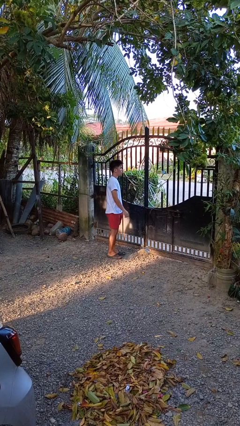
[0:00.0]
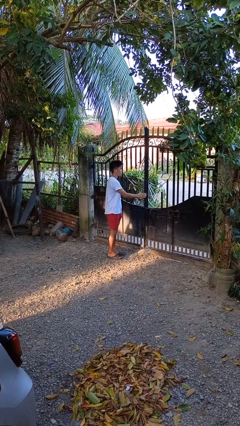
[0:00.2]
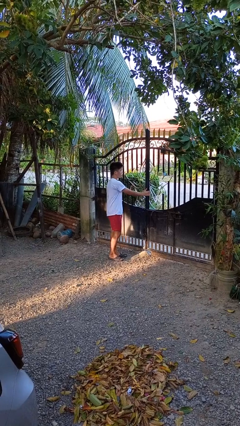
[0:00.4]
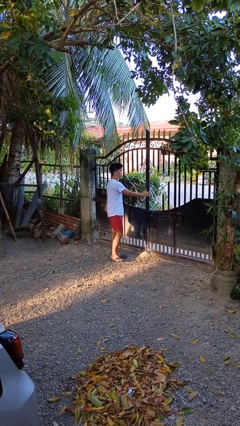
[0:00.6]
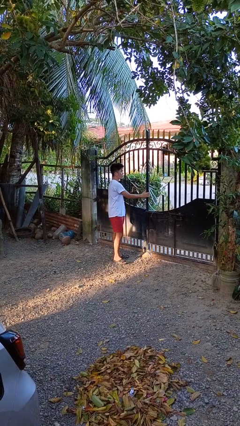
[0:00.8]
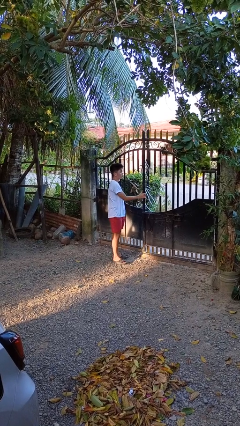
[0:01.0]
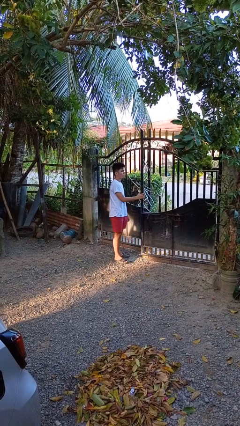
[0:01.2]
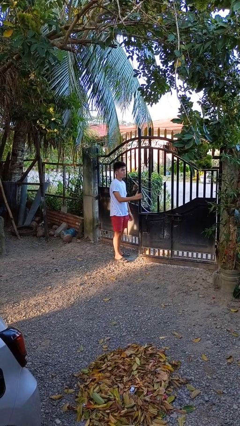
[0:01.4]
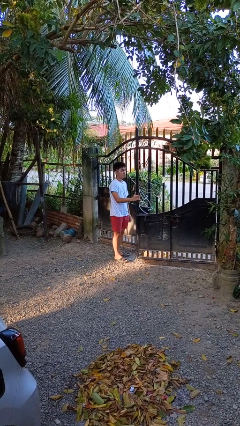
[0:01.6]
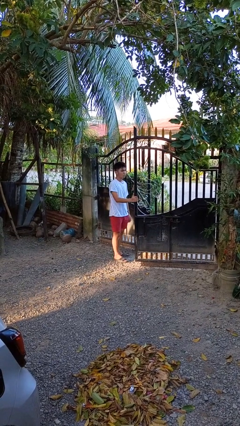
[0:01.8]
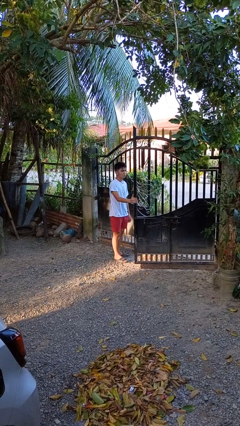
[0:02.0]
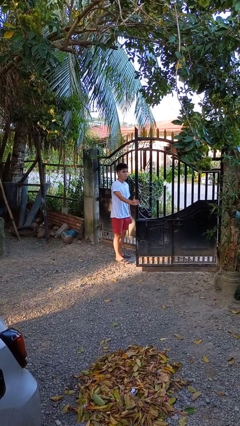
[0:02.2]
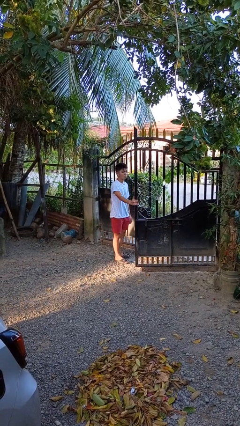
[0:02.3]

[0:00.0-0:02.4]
person opens gate

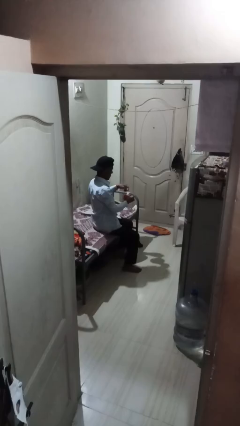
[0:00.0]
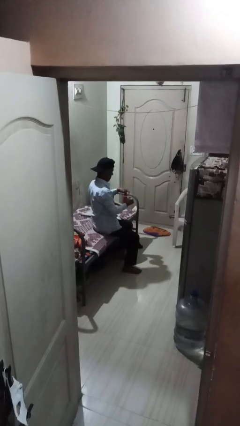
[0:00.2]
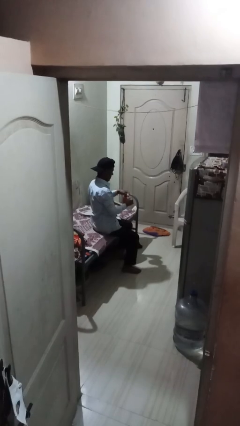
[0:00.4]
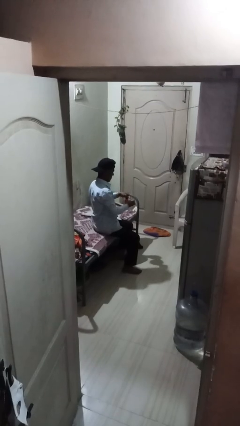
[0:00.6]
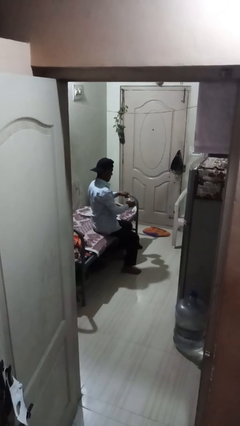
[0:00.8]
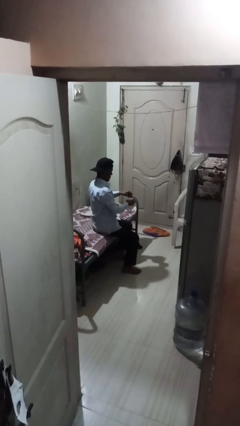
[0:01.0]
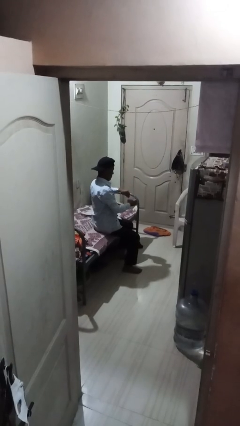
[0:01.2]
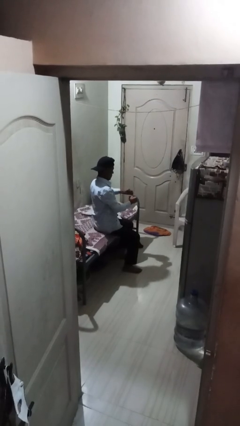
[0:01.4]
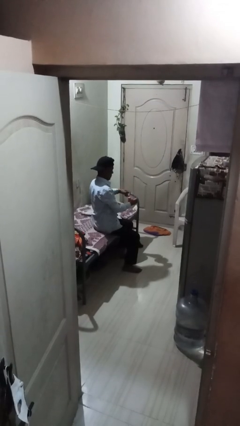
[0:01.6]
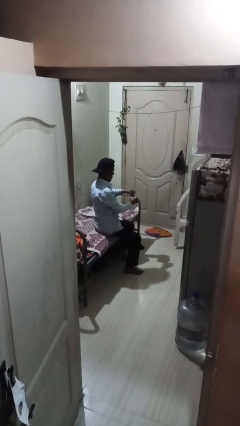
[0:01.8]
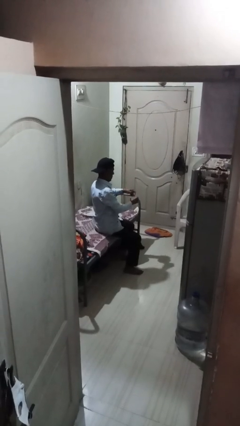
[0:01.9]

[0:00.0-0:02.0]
person stirs mug

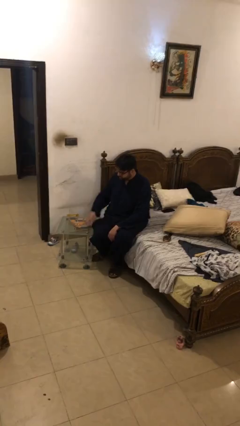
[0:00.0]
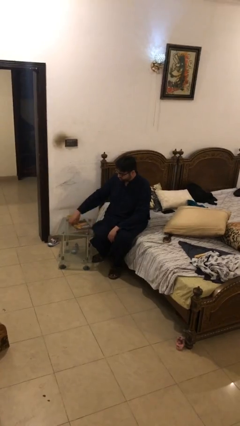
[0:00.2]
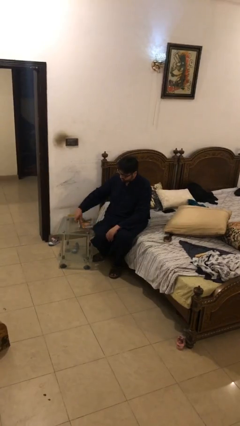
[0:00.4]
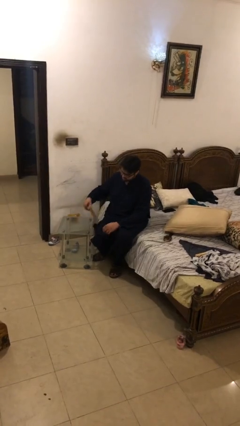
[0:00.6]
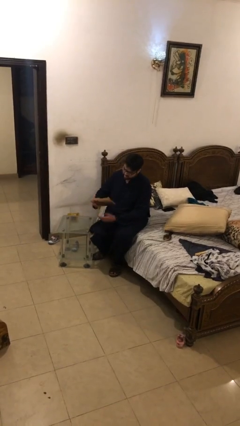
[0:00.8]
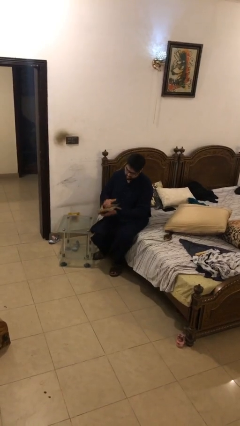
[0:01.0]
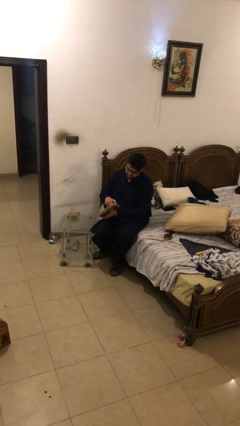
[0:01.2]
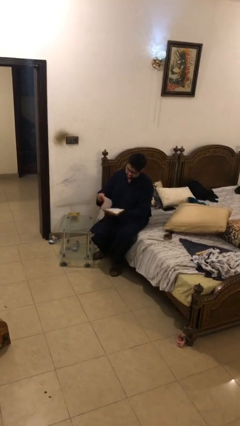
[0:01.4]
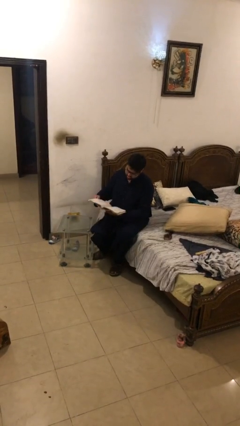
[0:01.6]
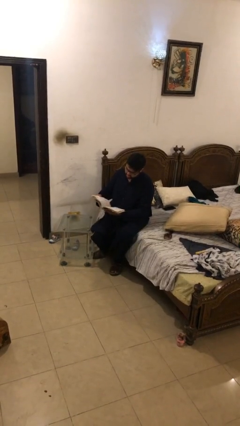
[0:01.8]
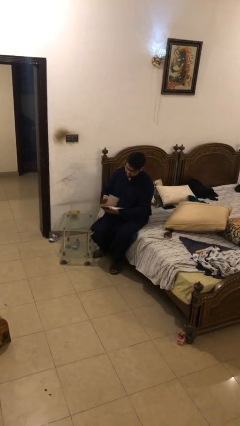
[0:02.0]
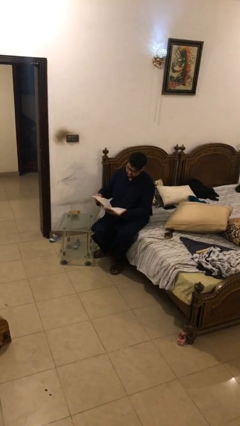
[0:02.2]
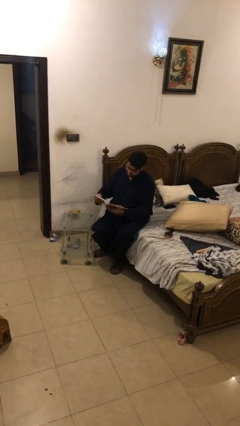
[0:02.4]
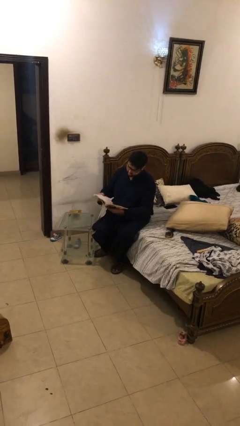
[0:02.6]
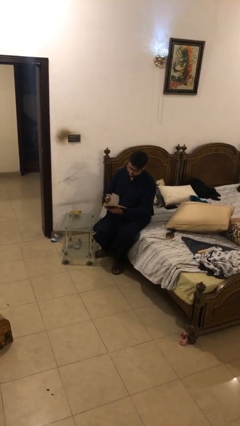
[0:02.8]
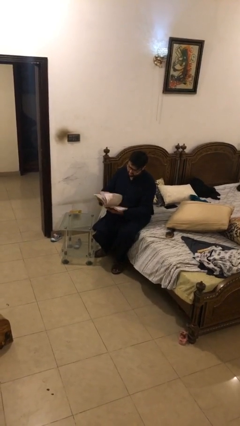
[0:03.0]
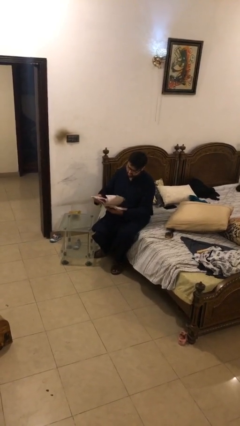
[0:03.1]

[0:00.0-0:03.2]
person reads document

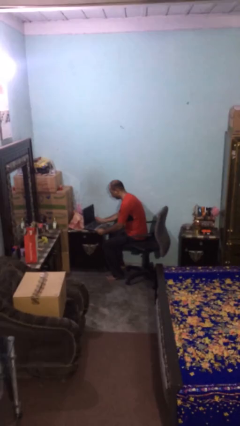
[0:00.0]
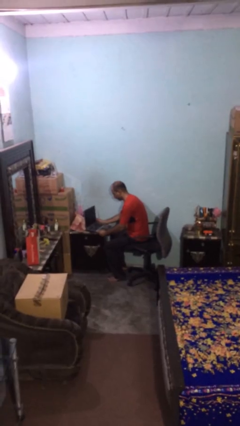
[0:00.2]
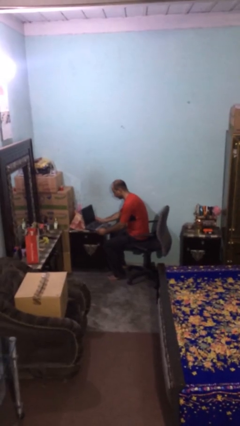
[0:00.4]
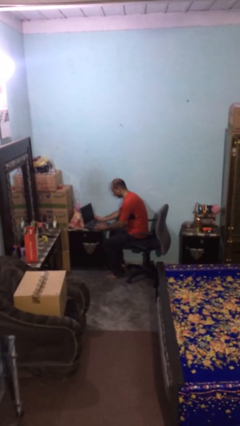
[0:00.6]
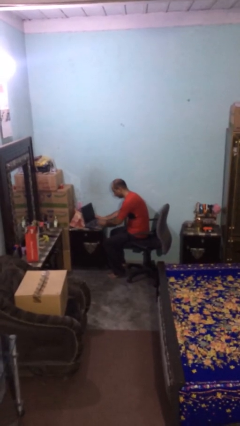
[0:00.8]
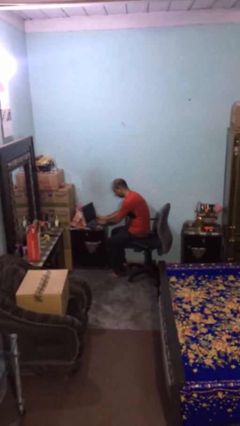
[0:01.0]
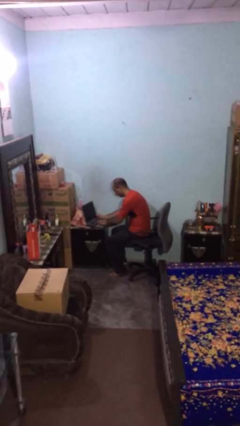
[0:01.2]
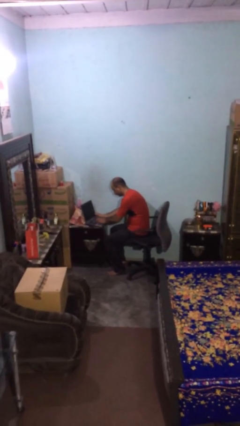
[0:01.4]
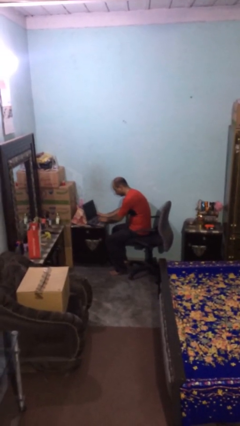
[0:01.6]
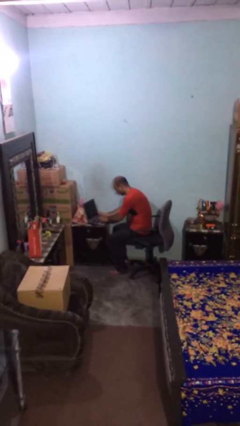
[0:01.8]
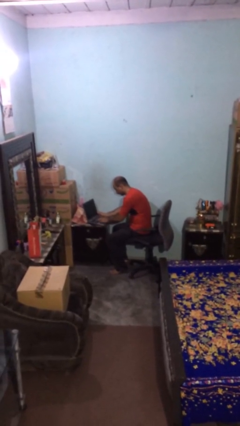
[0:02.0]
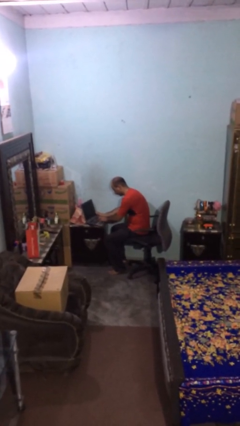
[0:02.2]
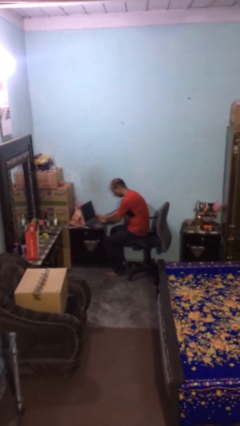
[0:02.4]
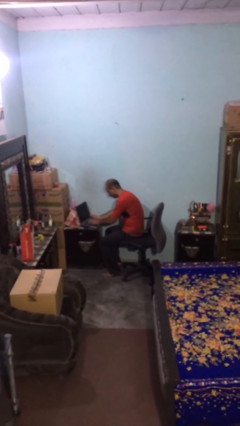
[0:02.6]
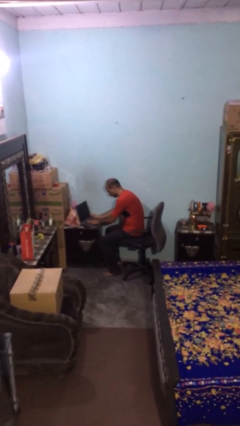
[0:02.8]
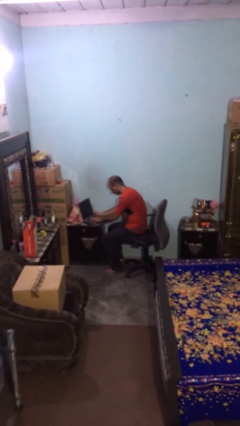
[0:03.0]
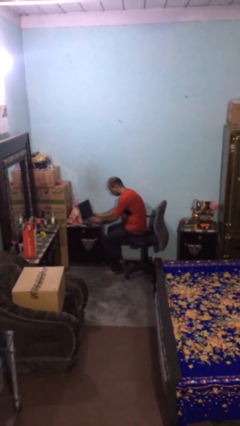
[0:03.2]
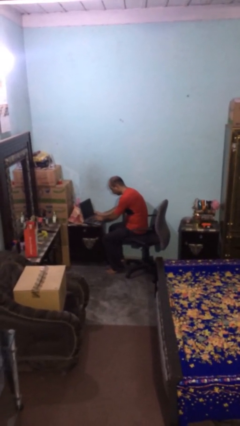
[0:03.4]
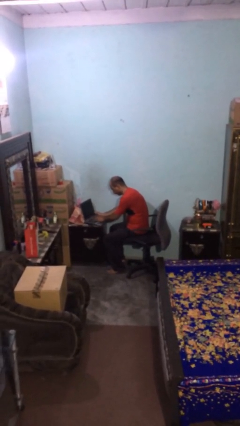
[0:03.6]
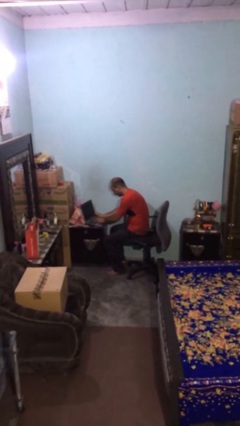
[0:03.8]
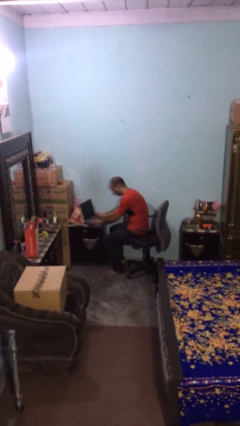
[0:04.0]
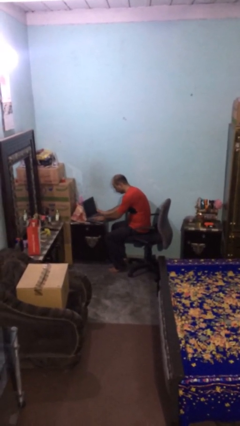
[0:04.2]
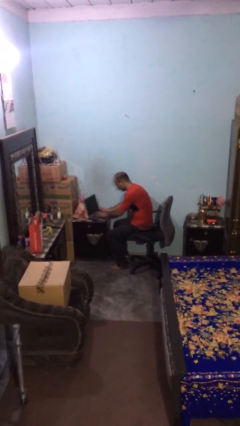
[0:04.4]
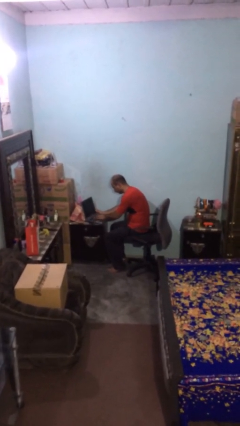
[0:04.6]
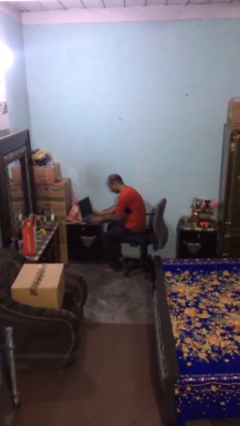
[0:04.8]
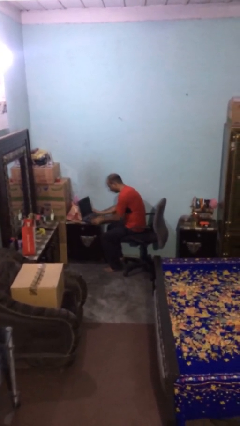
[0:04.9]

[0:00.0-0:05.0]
person interacts with laptop

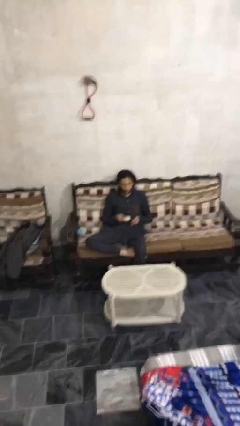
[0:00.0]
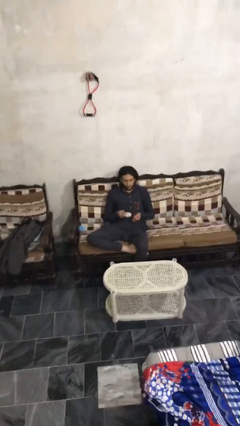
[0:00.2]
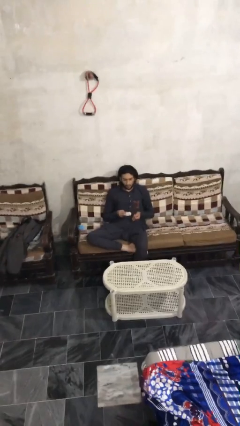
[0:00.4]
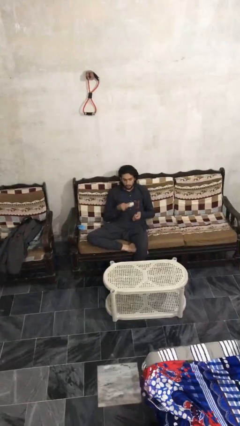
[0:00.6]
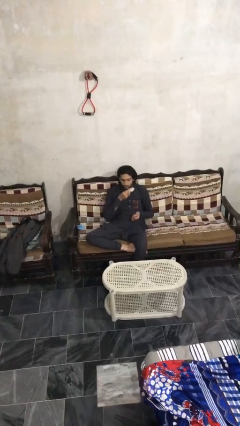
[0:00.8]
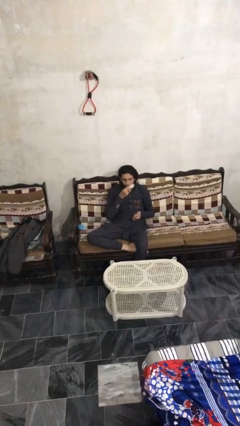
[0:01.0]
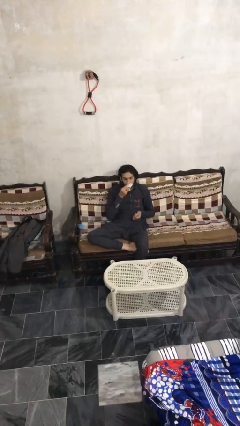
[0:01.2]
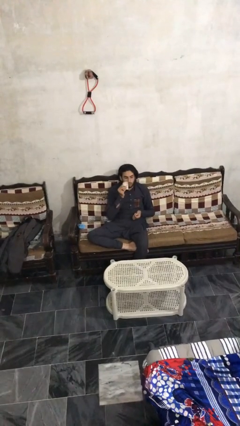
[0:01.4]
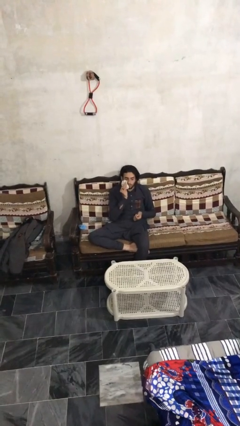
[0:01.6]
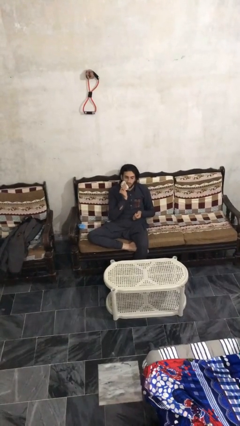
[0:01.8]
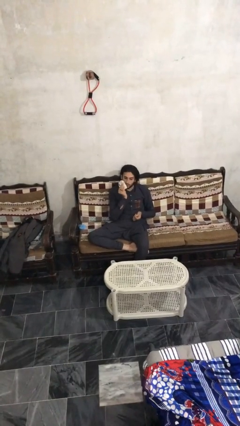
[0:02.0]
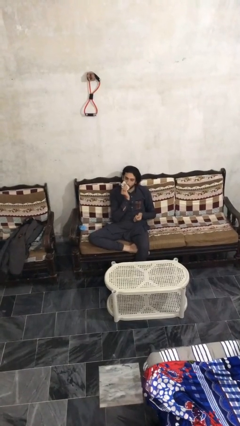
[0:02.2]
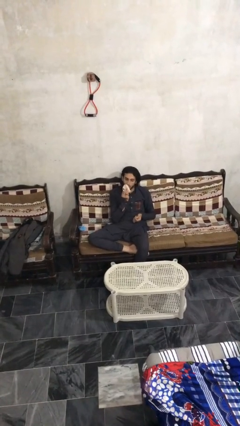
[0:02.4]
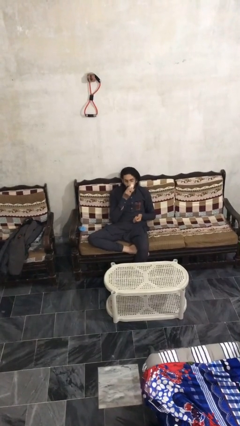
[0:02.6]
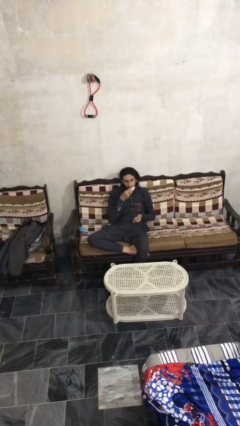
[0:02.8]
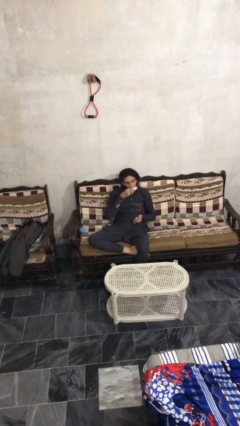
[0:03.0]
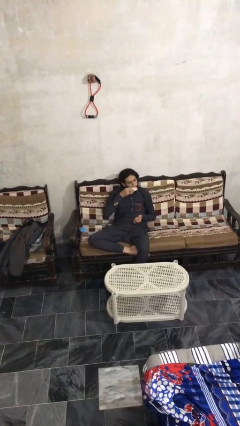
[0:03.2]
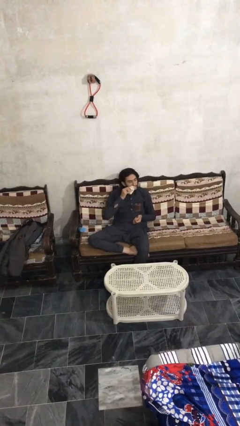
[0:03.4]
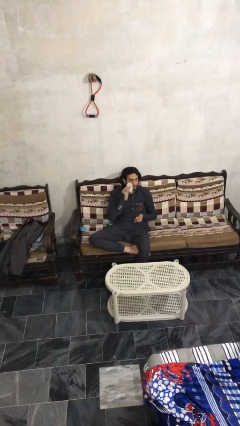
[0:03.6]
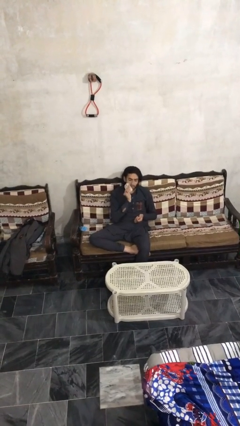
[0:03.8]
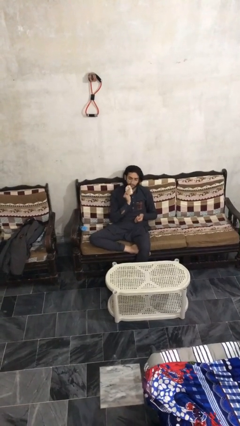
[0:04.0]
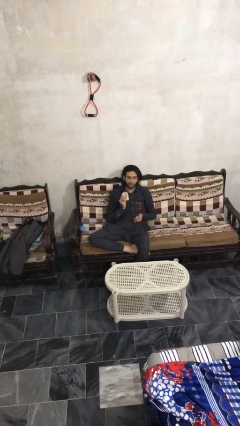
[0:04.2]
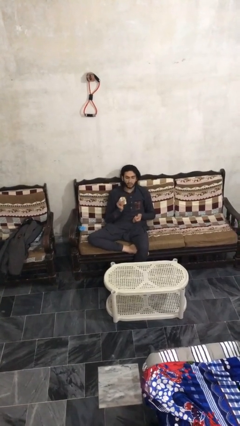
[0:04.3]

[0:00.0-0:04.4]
person wipes mouth with napkin

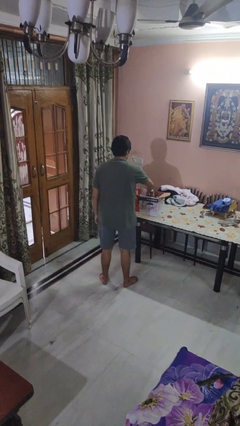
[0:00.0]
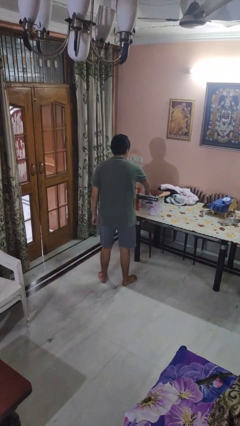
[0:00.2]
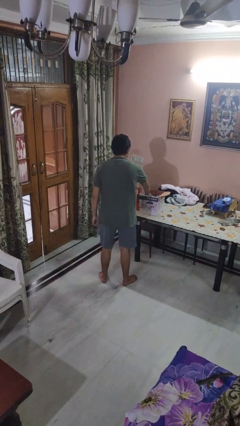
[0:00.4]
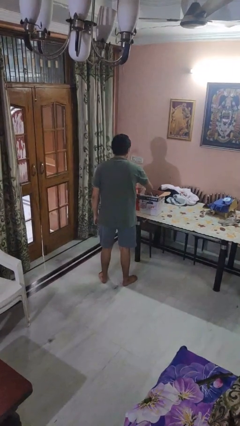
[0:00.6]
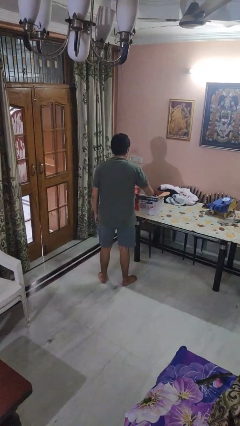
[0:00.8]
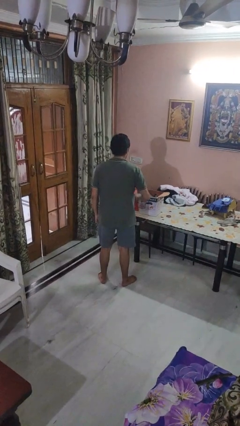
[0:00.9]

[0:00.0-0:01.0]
person puts object into box
